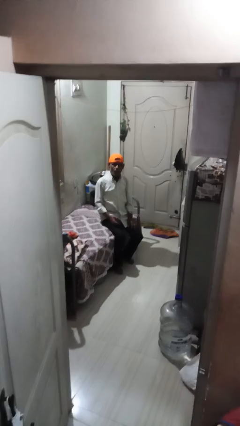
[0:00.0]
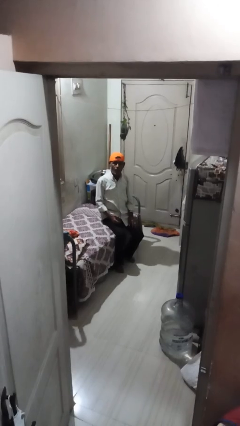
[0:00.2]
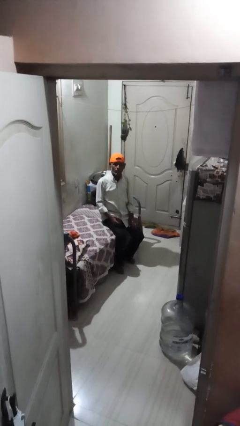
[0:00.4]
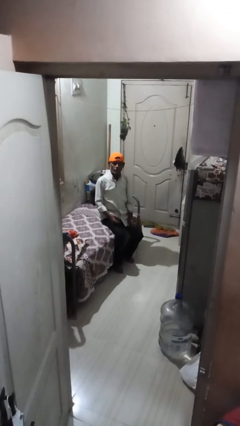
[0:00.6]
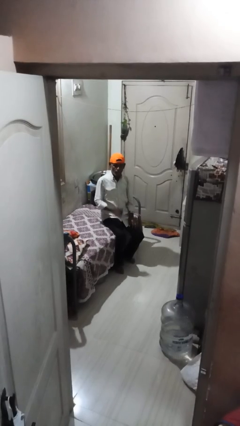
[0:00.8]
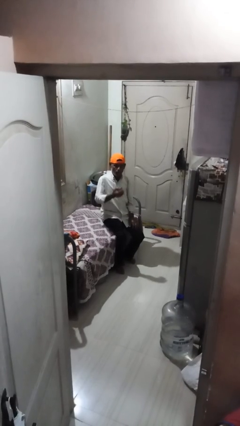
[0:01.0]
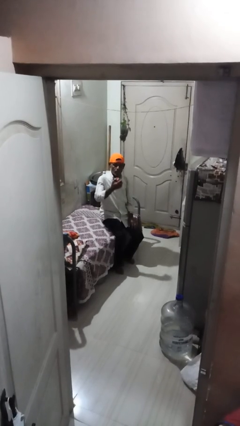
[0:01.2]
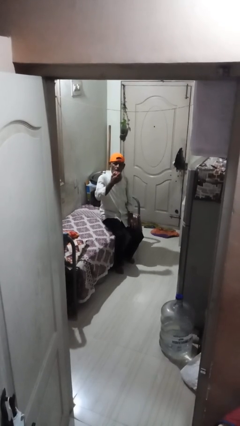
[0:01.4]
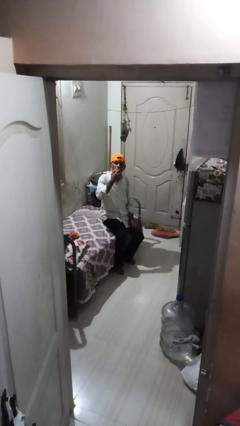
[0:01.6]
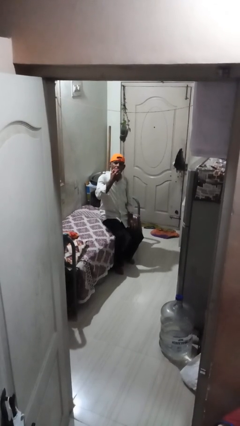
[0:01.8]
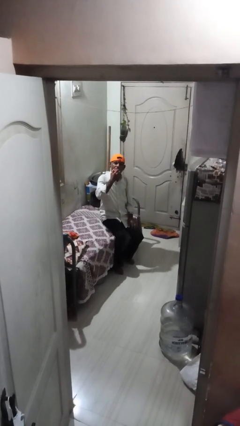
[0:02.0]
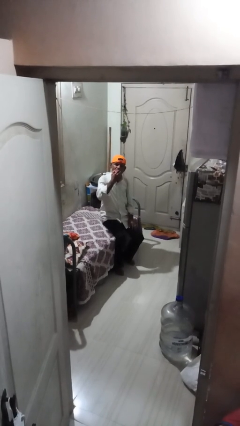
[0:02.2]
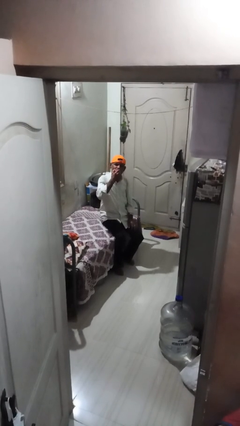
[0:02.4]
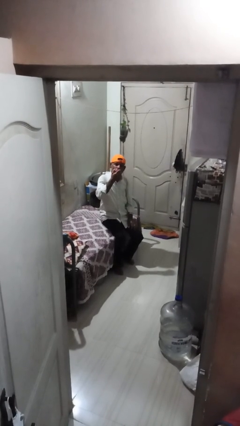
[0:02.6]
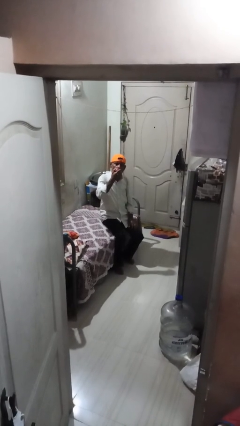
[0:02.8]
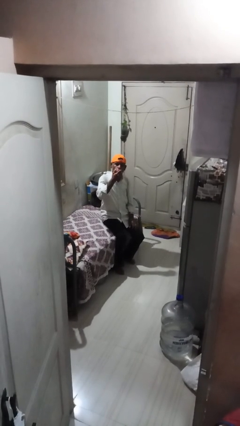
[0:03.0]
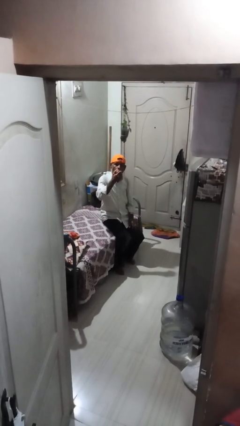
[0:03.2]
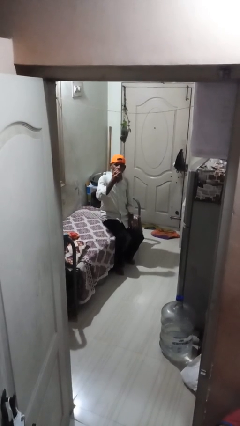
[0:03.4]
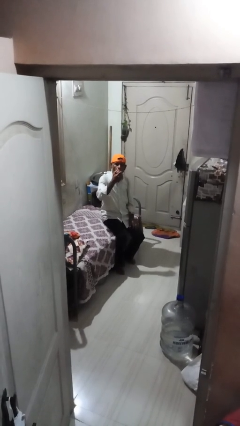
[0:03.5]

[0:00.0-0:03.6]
person eats apple

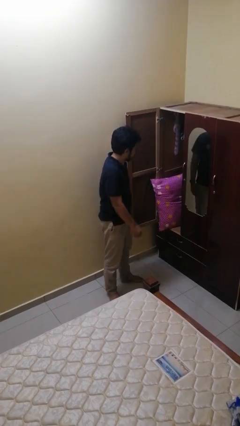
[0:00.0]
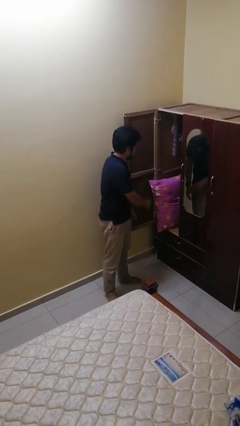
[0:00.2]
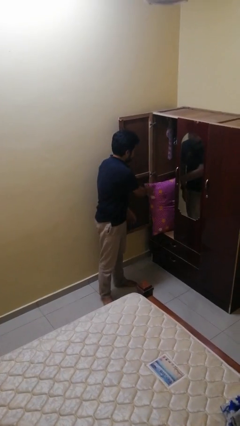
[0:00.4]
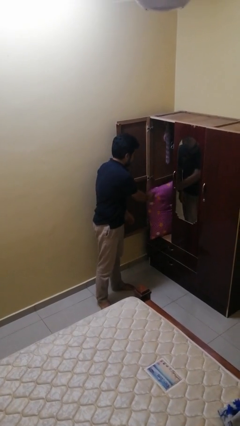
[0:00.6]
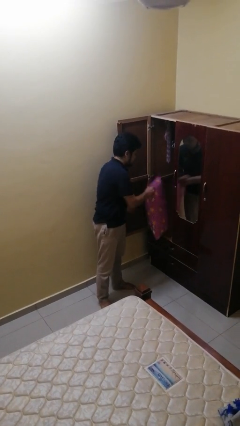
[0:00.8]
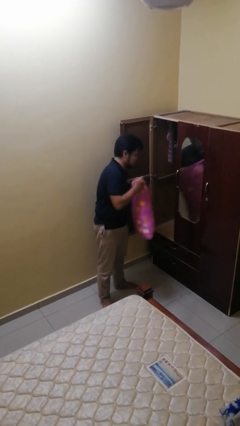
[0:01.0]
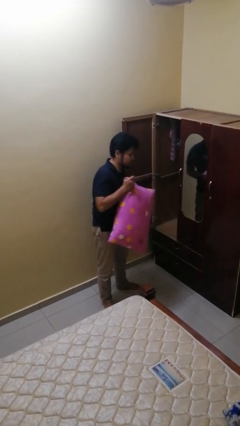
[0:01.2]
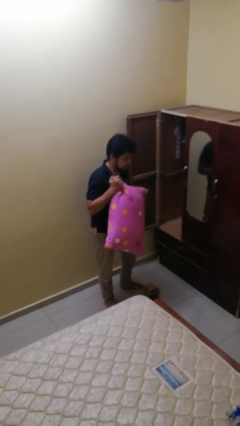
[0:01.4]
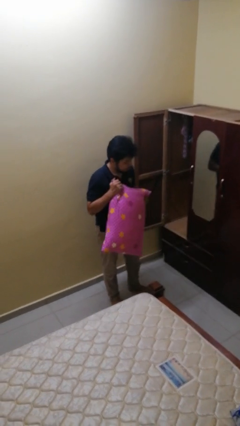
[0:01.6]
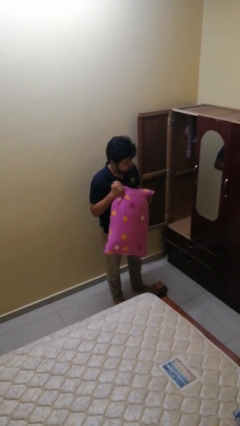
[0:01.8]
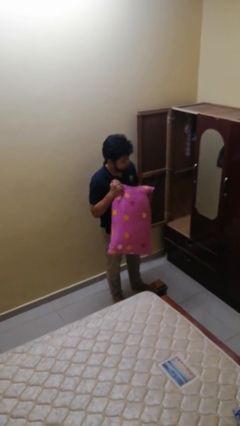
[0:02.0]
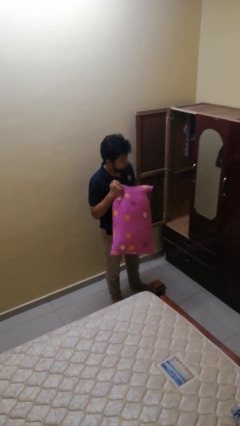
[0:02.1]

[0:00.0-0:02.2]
person picks up object from cabinet

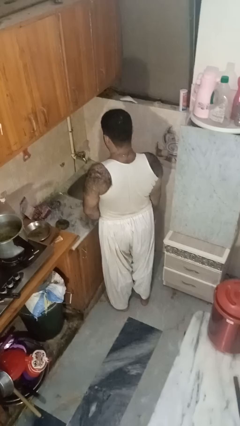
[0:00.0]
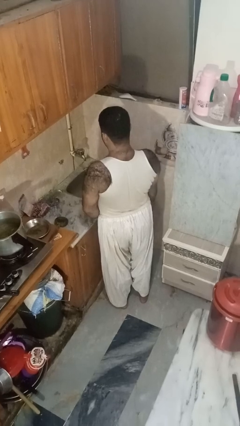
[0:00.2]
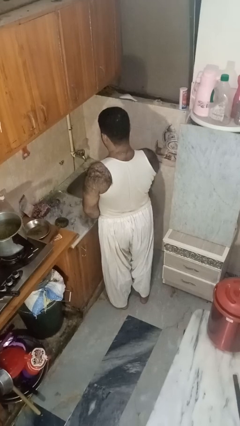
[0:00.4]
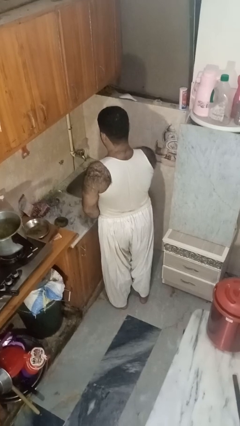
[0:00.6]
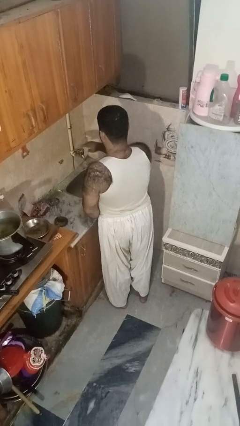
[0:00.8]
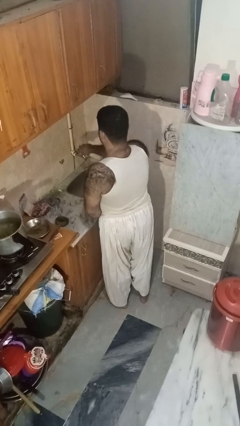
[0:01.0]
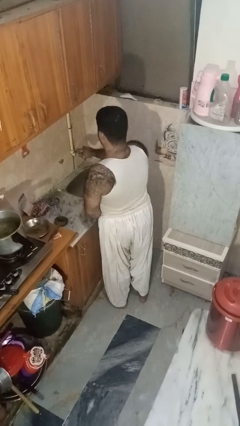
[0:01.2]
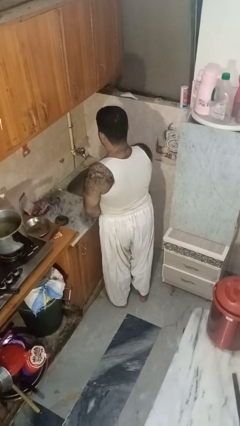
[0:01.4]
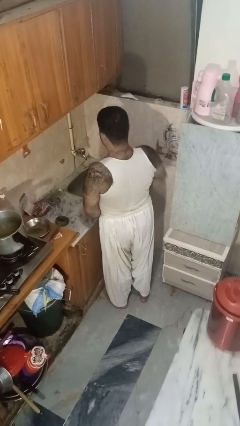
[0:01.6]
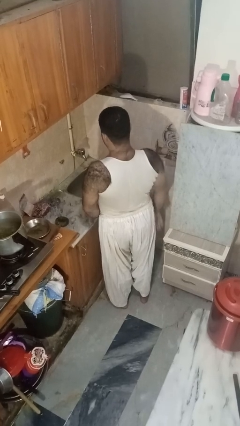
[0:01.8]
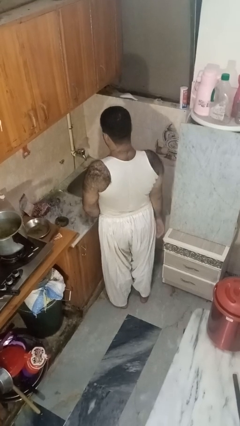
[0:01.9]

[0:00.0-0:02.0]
person turns off faucet

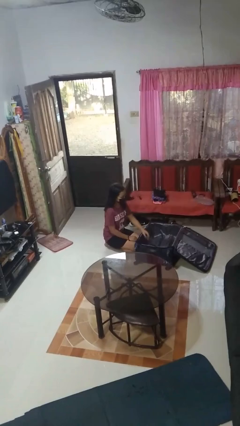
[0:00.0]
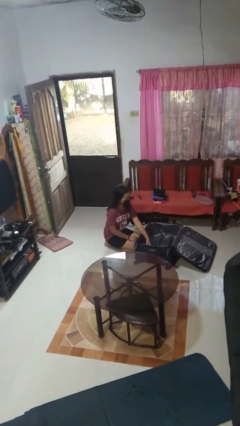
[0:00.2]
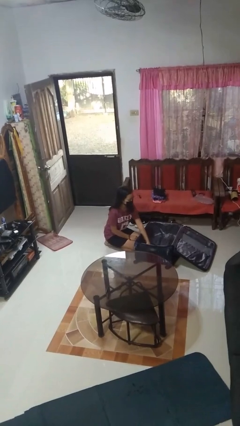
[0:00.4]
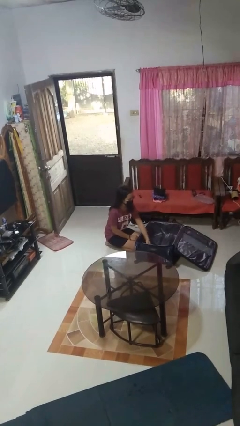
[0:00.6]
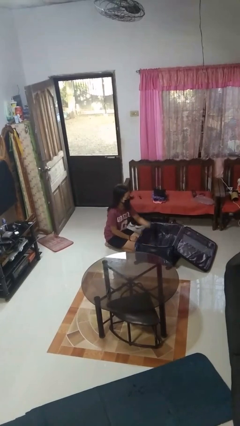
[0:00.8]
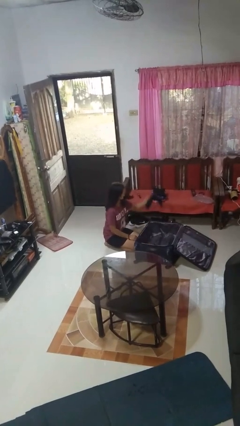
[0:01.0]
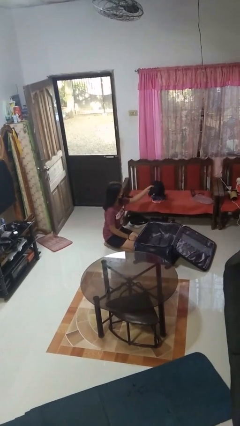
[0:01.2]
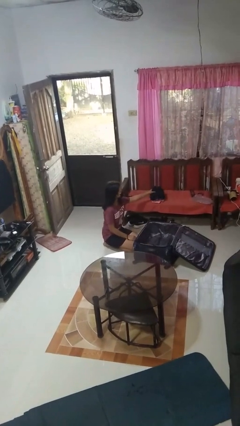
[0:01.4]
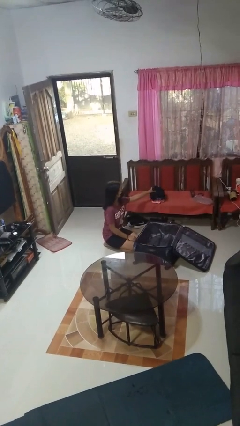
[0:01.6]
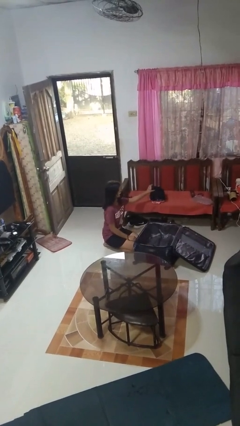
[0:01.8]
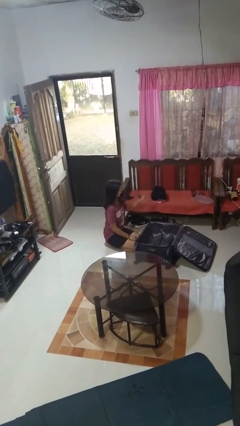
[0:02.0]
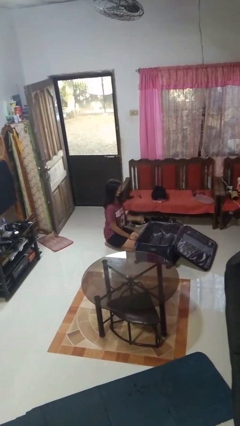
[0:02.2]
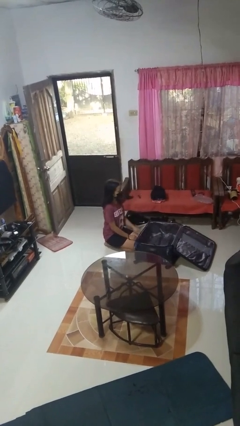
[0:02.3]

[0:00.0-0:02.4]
person unloads clothes from suitcase

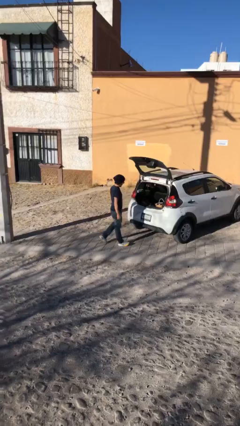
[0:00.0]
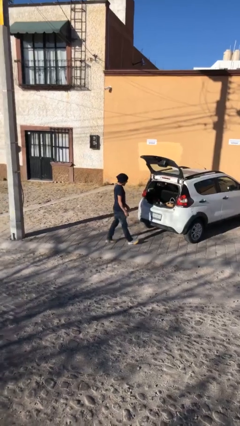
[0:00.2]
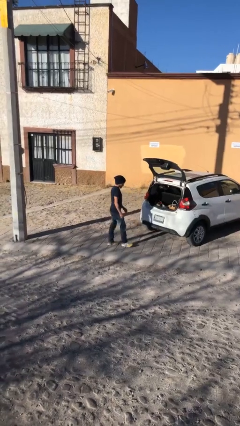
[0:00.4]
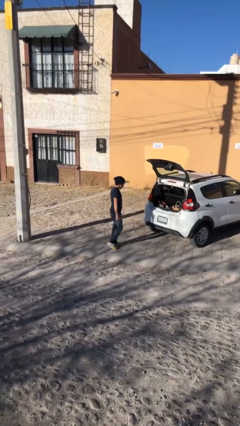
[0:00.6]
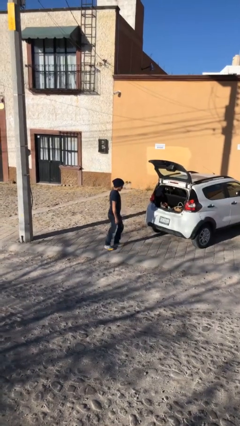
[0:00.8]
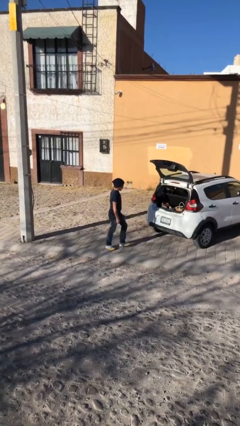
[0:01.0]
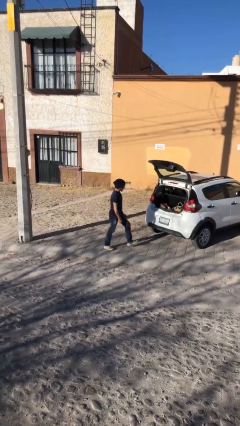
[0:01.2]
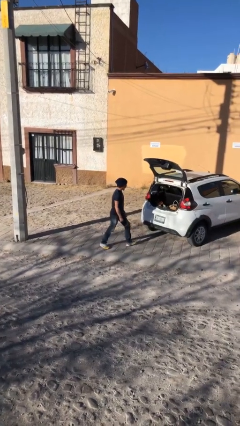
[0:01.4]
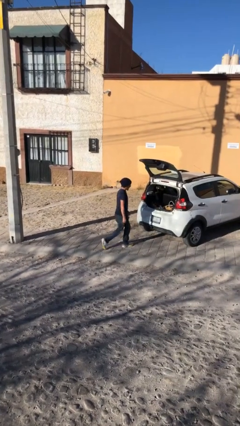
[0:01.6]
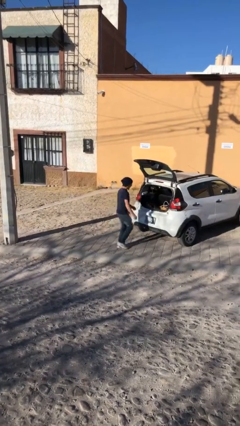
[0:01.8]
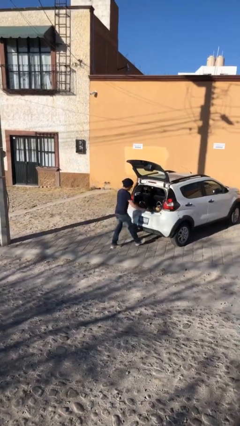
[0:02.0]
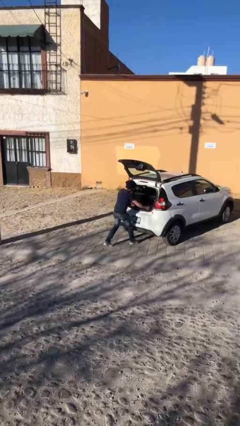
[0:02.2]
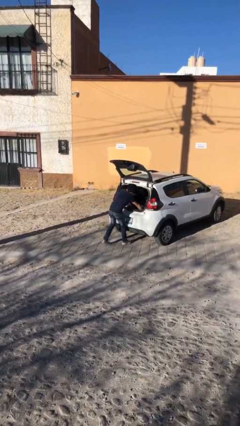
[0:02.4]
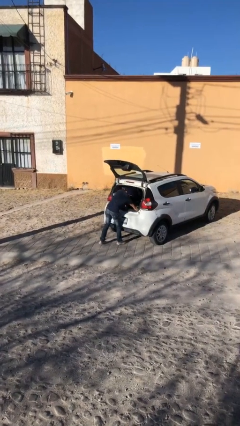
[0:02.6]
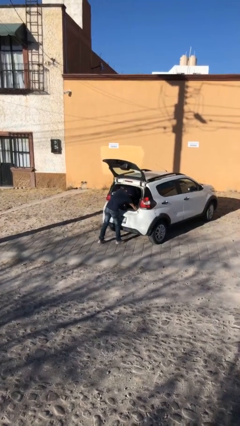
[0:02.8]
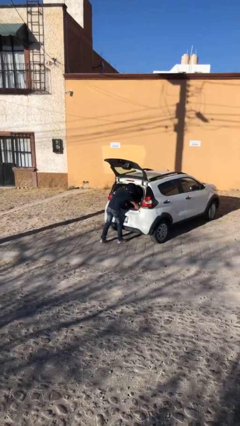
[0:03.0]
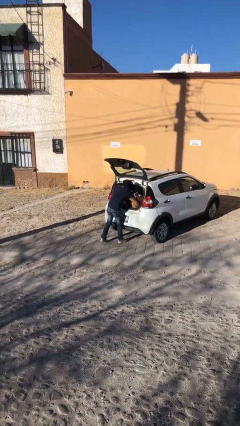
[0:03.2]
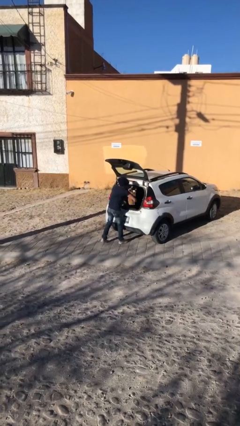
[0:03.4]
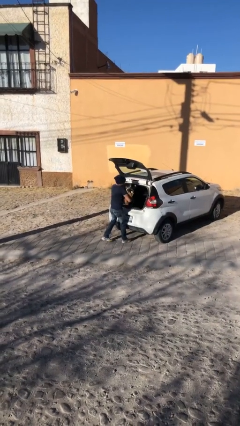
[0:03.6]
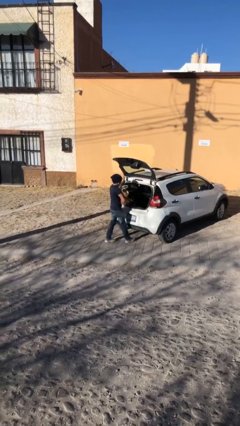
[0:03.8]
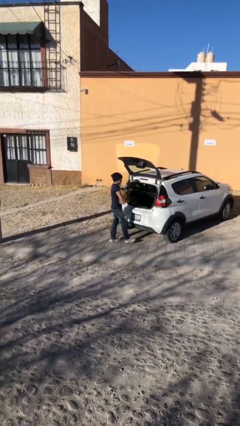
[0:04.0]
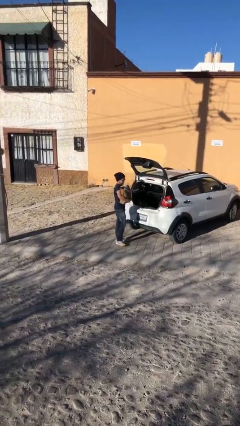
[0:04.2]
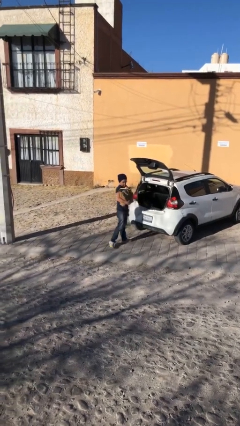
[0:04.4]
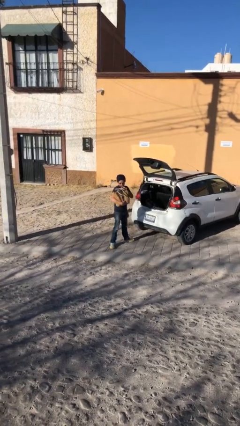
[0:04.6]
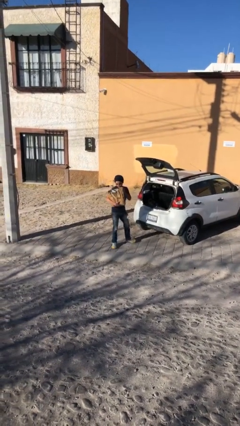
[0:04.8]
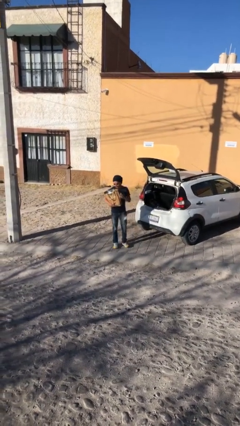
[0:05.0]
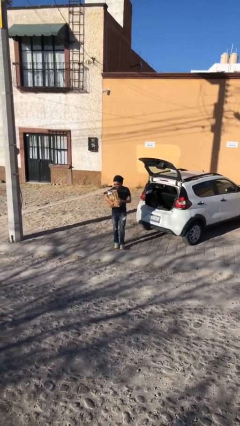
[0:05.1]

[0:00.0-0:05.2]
person unloads car

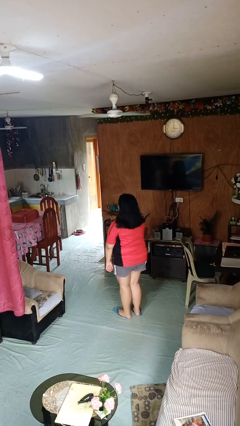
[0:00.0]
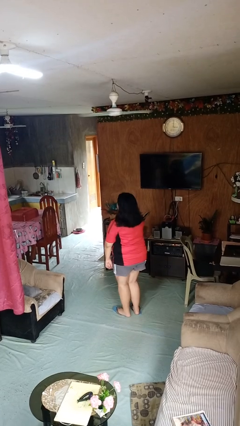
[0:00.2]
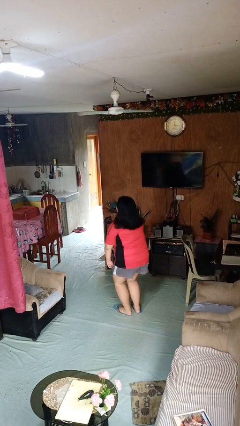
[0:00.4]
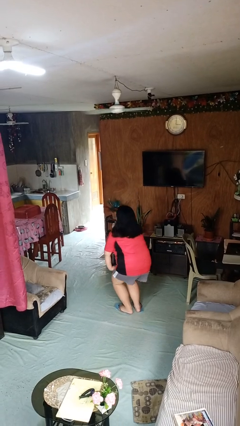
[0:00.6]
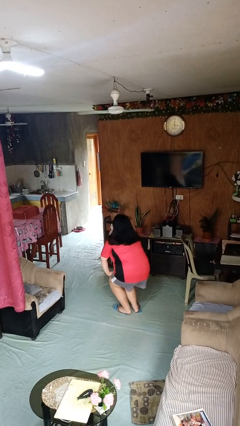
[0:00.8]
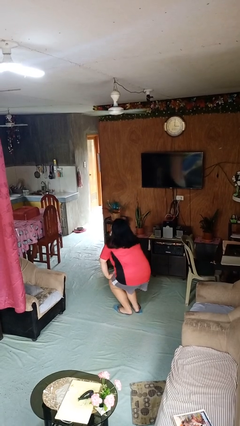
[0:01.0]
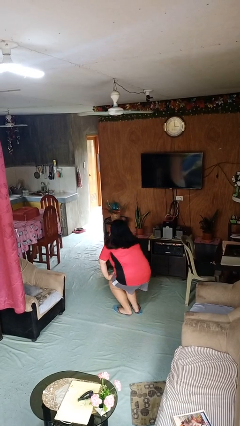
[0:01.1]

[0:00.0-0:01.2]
person squats
